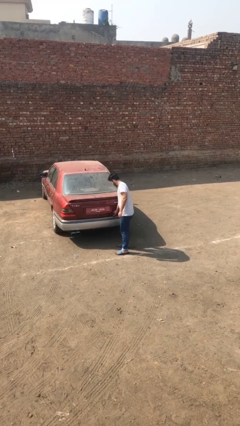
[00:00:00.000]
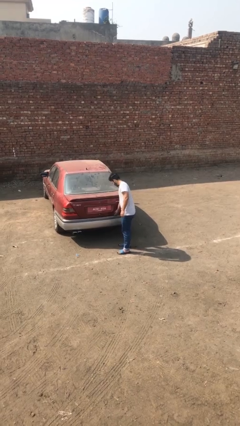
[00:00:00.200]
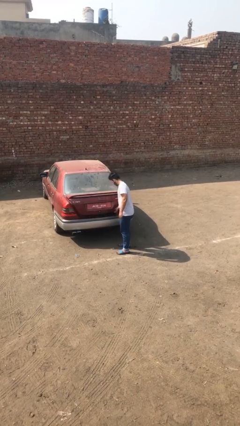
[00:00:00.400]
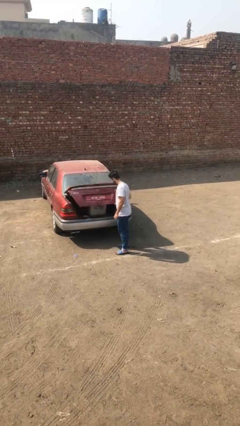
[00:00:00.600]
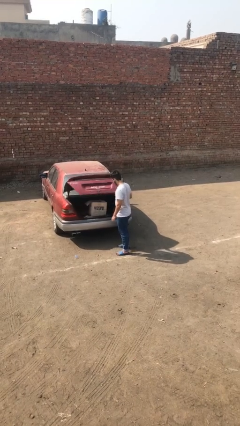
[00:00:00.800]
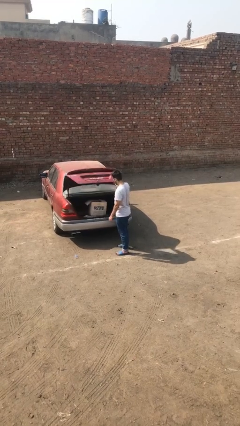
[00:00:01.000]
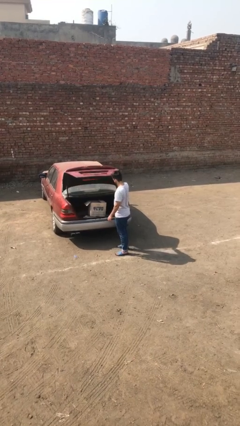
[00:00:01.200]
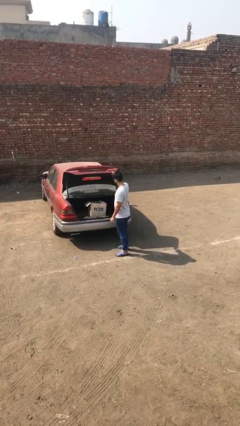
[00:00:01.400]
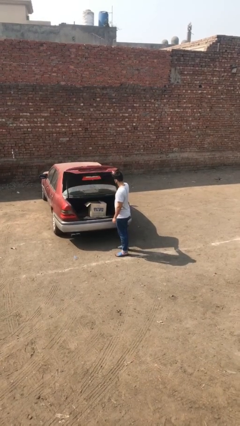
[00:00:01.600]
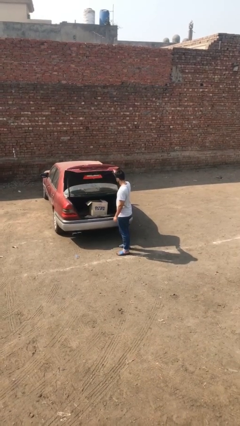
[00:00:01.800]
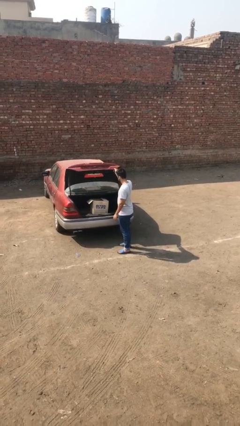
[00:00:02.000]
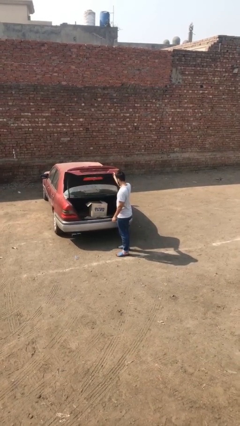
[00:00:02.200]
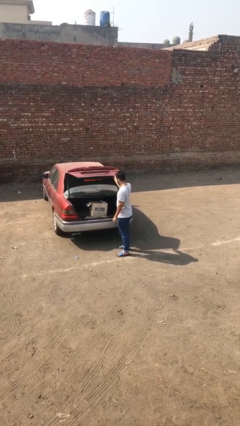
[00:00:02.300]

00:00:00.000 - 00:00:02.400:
person opens car trunk

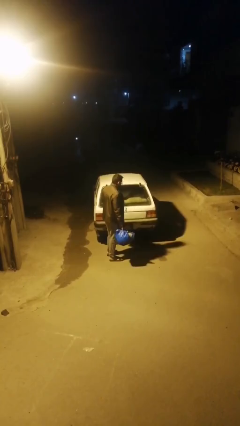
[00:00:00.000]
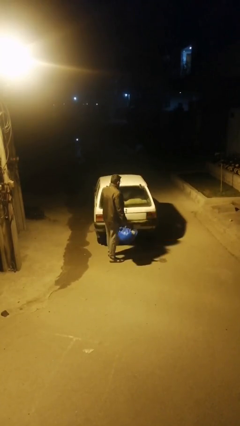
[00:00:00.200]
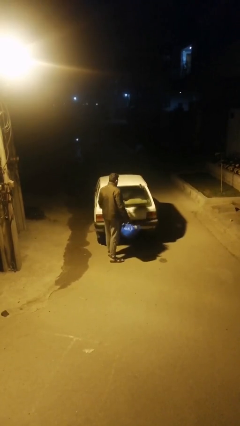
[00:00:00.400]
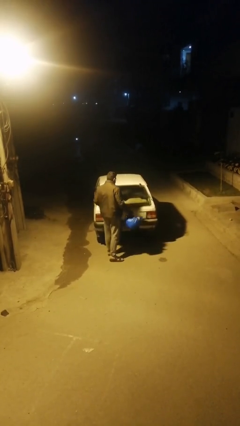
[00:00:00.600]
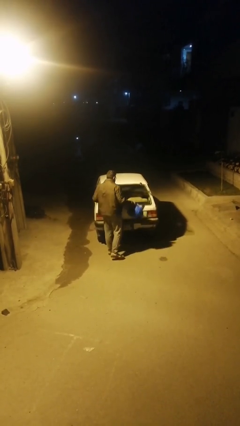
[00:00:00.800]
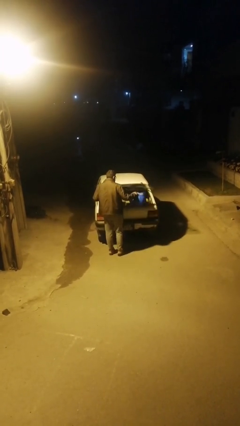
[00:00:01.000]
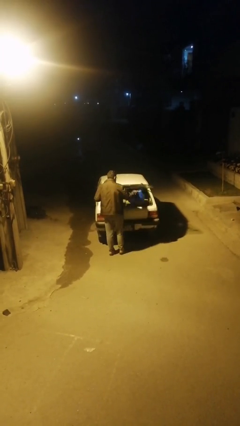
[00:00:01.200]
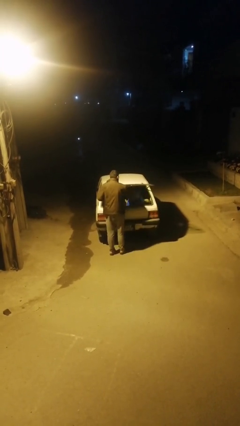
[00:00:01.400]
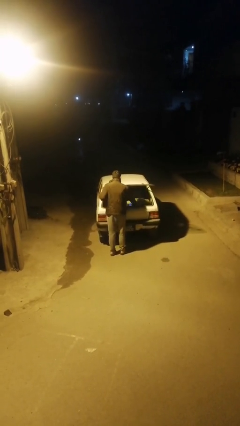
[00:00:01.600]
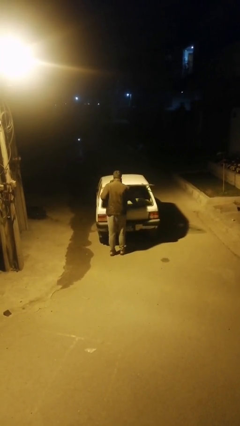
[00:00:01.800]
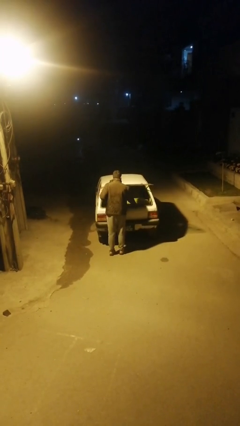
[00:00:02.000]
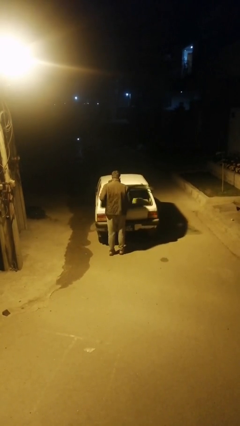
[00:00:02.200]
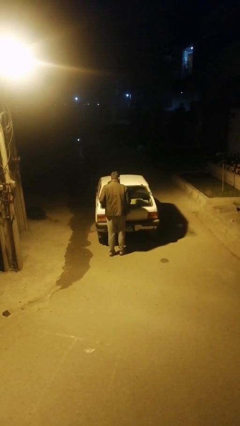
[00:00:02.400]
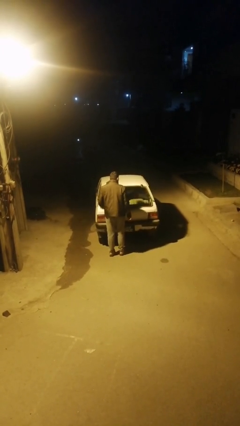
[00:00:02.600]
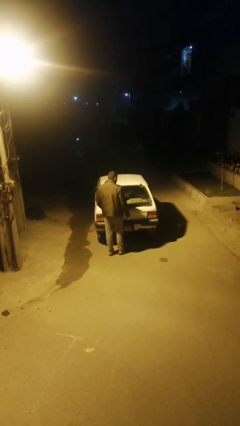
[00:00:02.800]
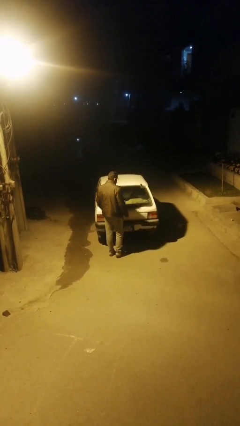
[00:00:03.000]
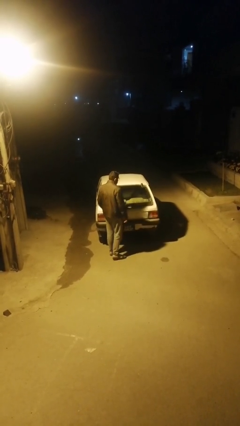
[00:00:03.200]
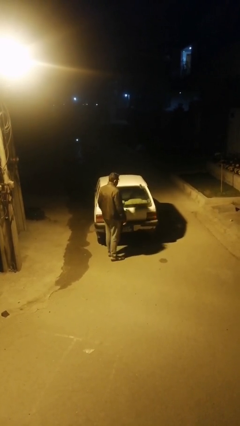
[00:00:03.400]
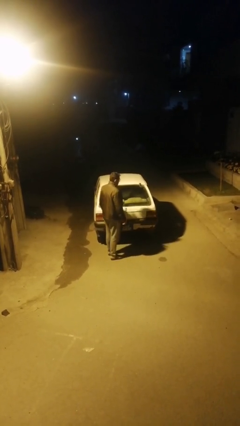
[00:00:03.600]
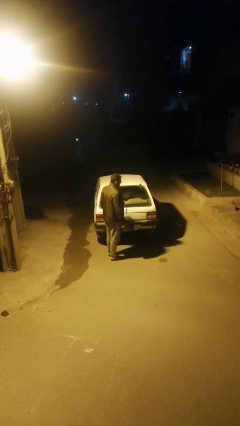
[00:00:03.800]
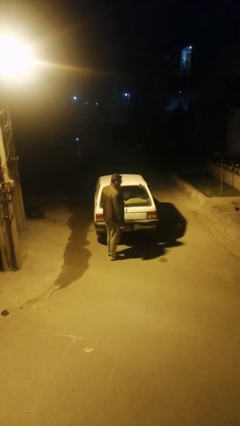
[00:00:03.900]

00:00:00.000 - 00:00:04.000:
person loads car

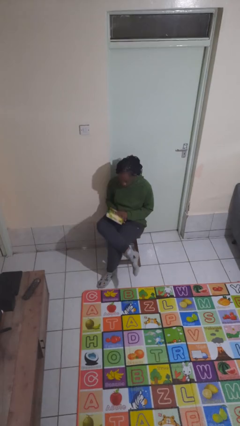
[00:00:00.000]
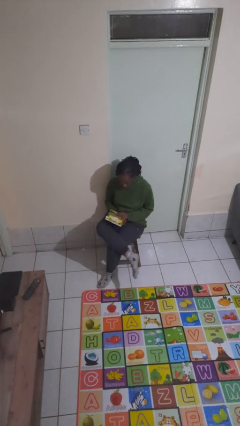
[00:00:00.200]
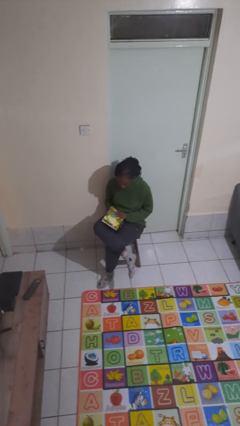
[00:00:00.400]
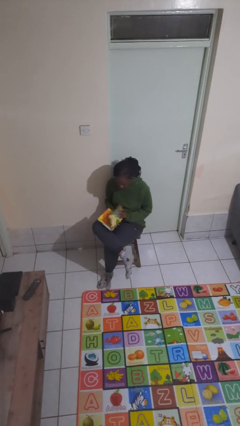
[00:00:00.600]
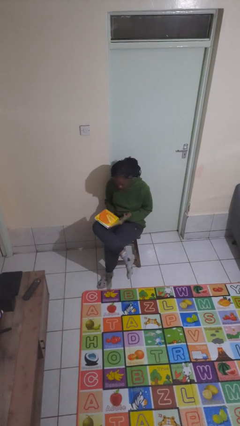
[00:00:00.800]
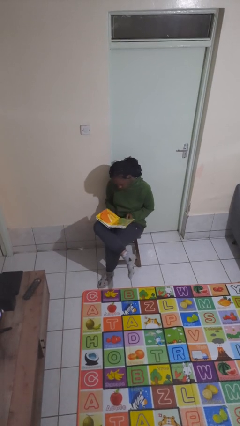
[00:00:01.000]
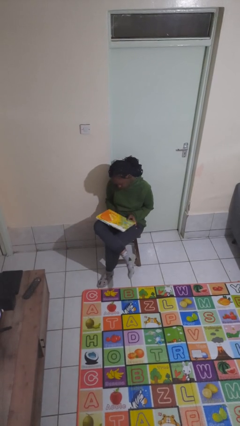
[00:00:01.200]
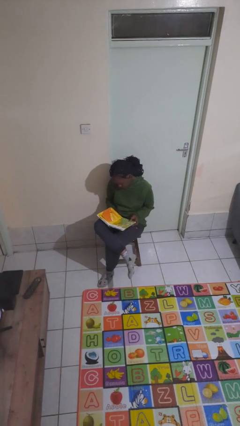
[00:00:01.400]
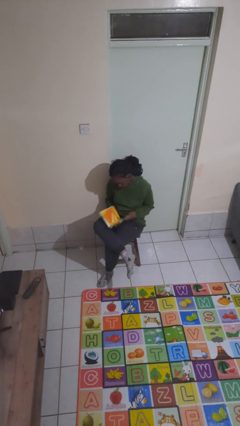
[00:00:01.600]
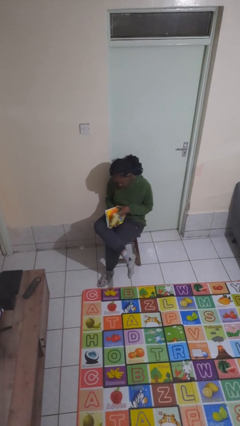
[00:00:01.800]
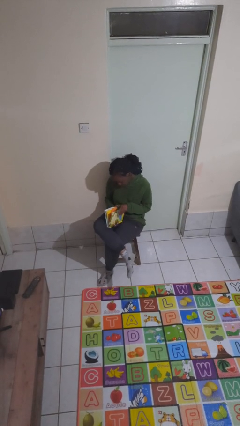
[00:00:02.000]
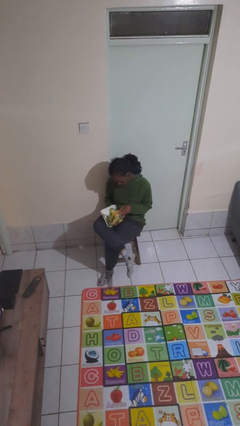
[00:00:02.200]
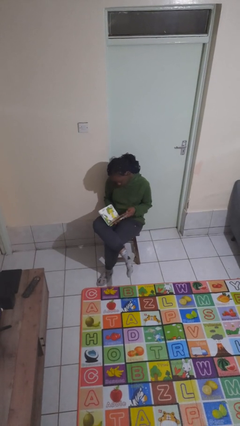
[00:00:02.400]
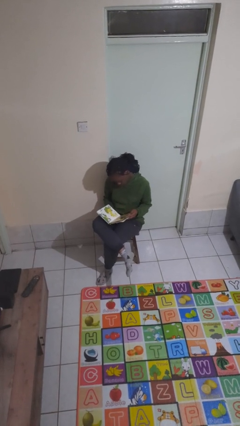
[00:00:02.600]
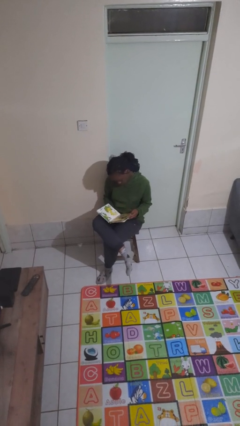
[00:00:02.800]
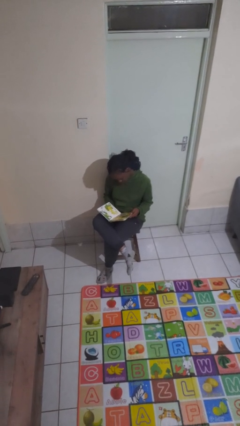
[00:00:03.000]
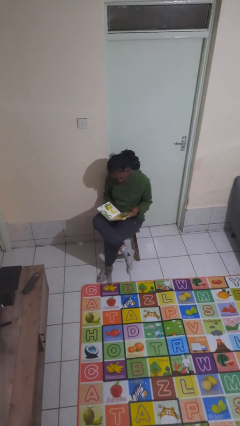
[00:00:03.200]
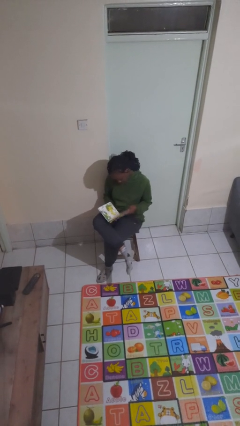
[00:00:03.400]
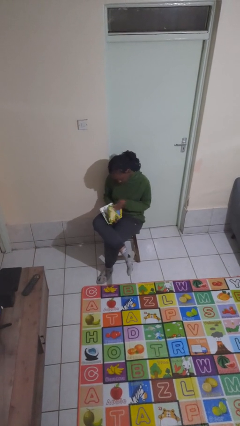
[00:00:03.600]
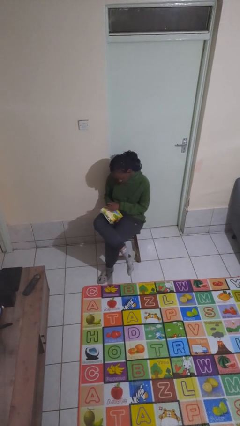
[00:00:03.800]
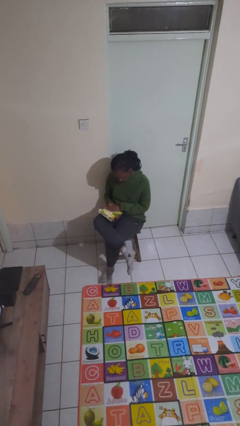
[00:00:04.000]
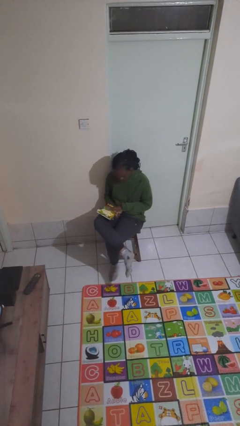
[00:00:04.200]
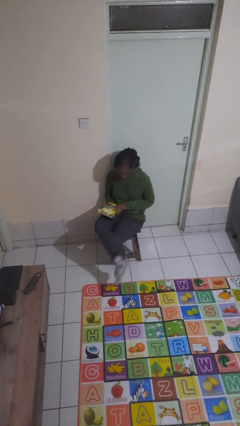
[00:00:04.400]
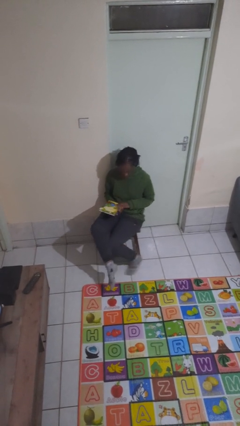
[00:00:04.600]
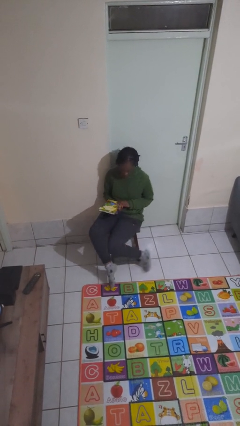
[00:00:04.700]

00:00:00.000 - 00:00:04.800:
person reads book

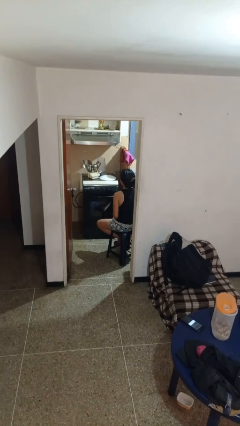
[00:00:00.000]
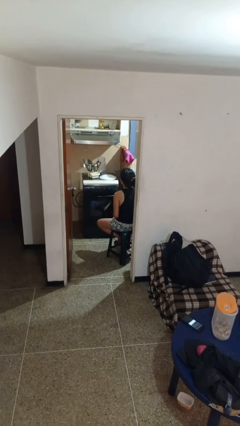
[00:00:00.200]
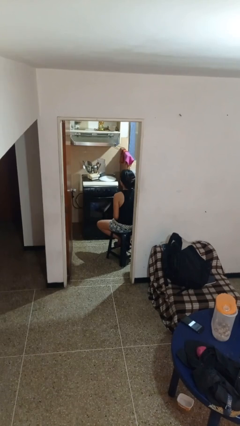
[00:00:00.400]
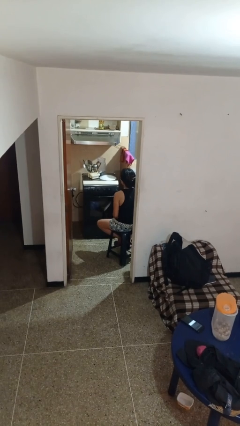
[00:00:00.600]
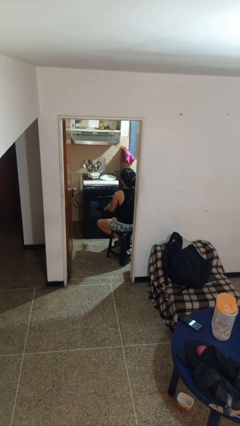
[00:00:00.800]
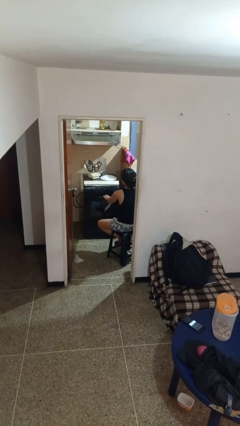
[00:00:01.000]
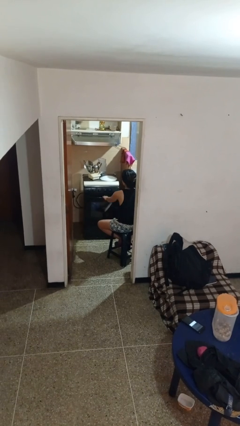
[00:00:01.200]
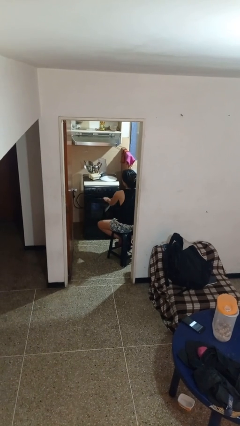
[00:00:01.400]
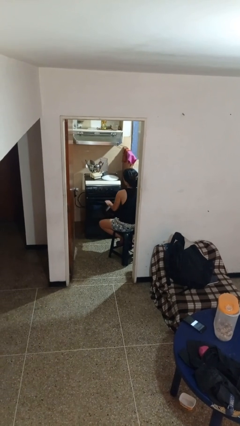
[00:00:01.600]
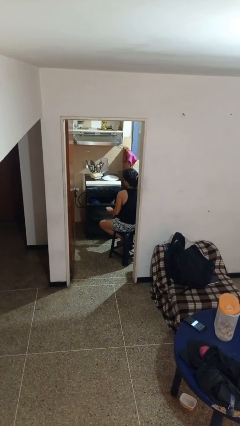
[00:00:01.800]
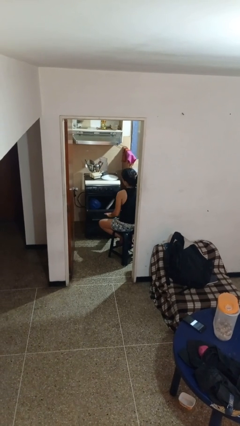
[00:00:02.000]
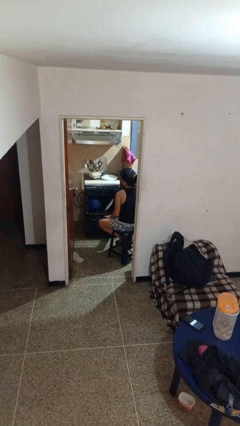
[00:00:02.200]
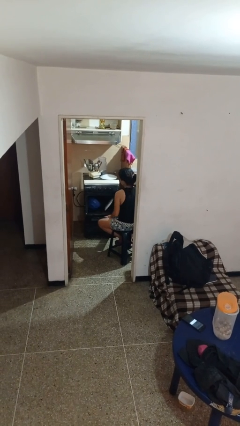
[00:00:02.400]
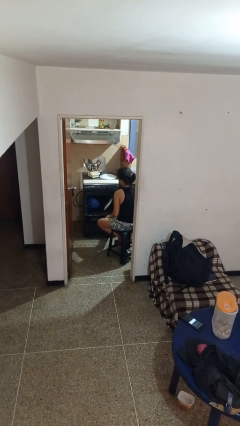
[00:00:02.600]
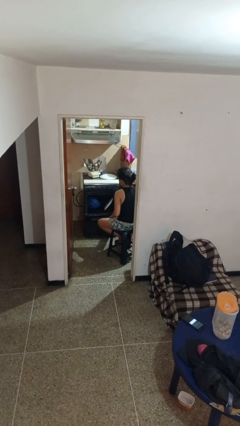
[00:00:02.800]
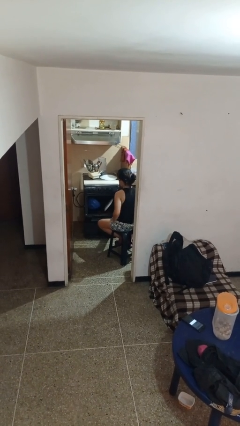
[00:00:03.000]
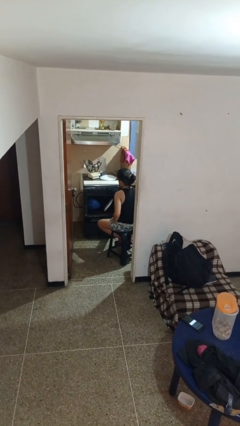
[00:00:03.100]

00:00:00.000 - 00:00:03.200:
person opens dishwasher

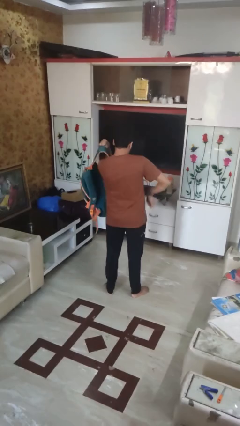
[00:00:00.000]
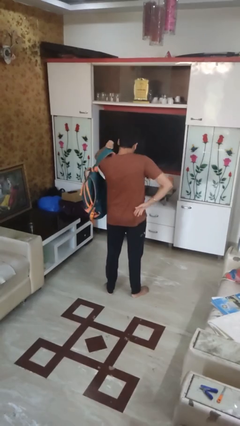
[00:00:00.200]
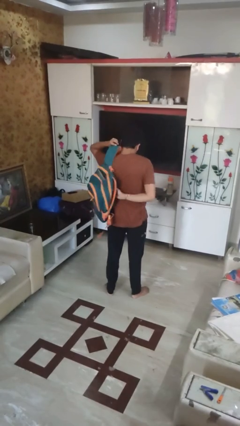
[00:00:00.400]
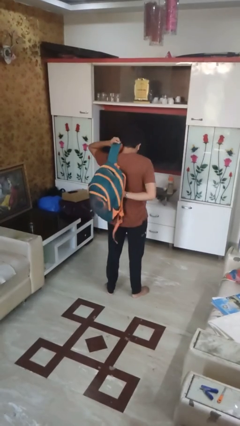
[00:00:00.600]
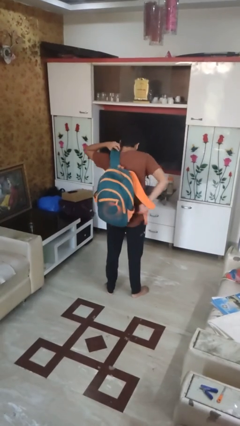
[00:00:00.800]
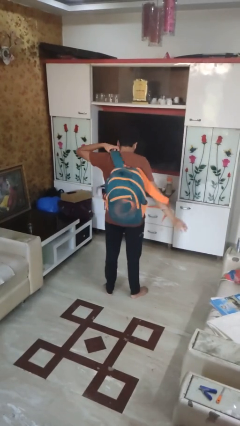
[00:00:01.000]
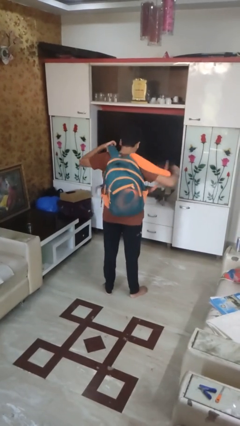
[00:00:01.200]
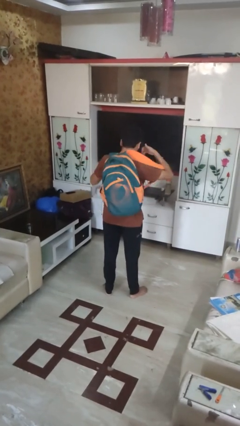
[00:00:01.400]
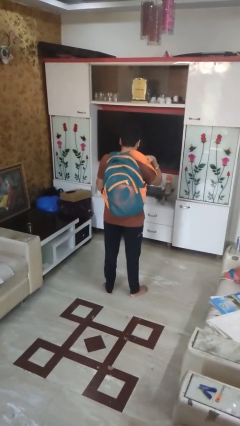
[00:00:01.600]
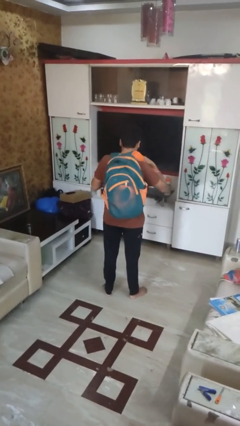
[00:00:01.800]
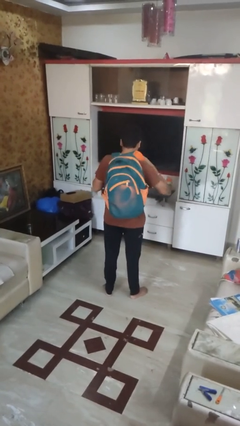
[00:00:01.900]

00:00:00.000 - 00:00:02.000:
person puts on backpack

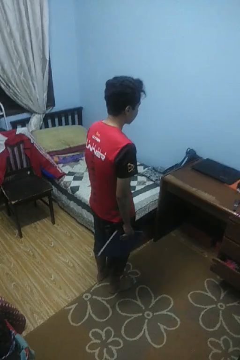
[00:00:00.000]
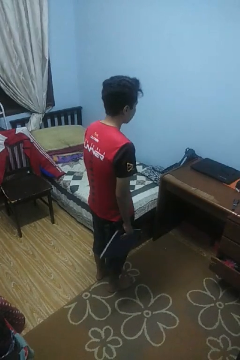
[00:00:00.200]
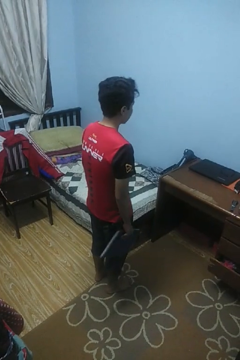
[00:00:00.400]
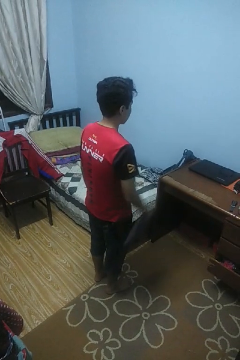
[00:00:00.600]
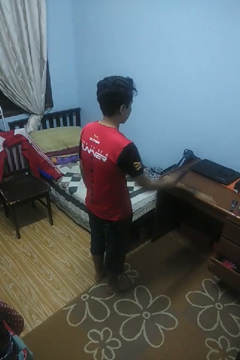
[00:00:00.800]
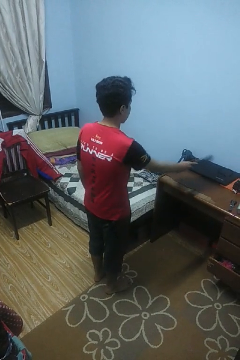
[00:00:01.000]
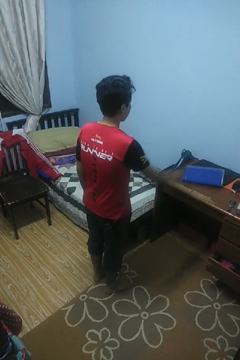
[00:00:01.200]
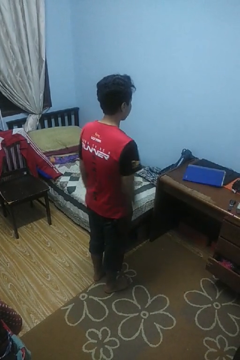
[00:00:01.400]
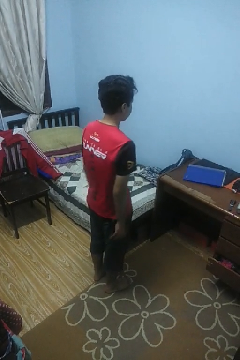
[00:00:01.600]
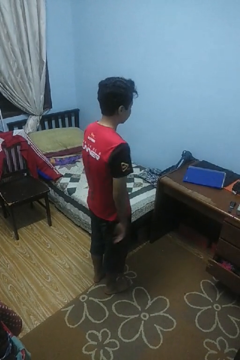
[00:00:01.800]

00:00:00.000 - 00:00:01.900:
person throws object on table
